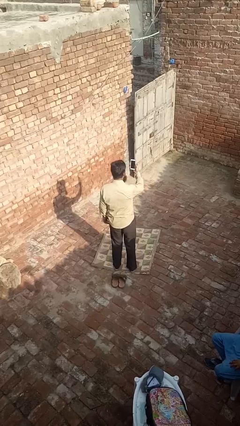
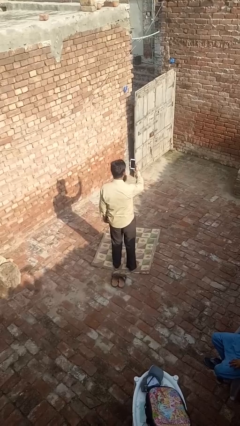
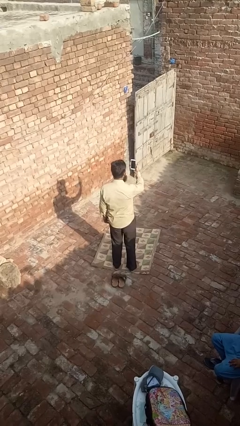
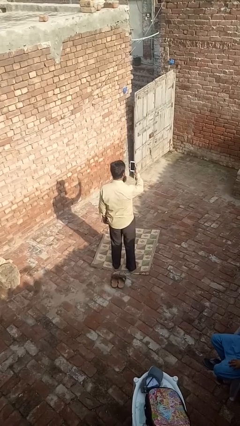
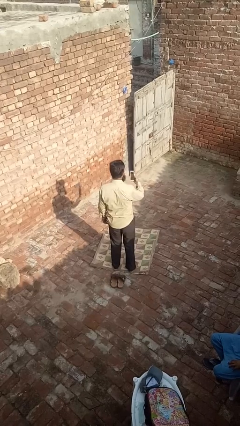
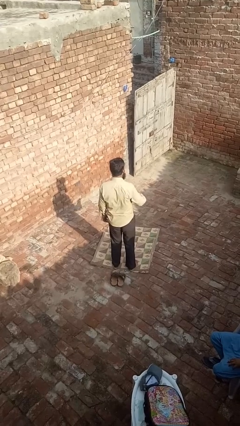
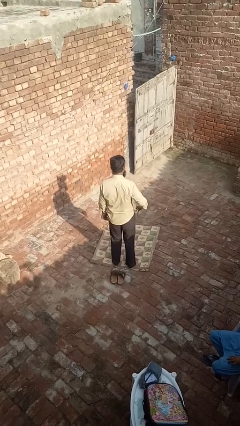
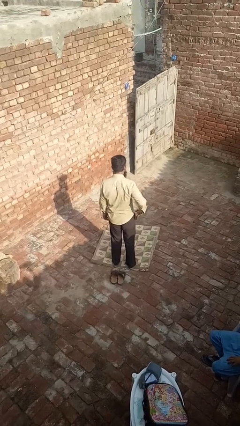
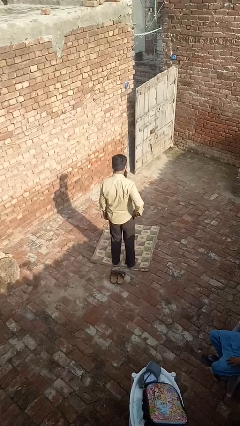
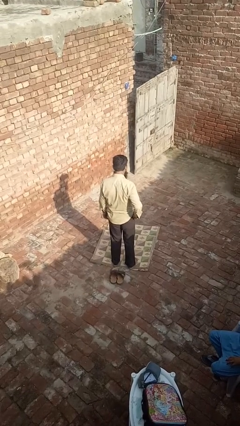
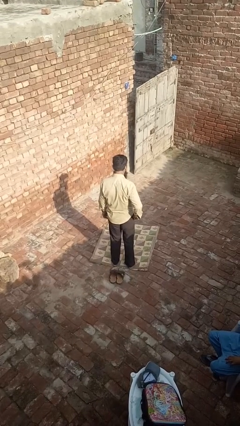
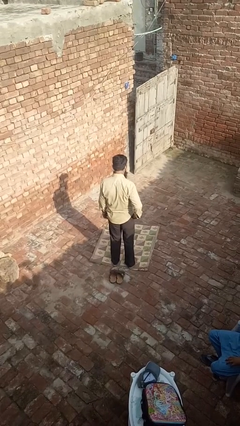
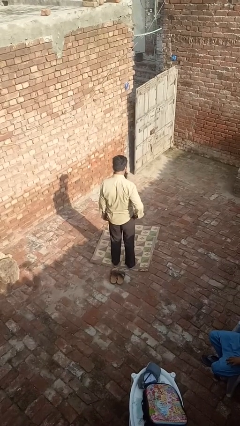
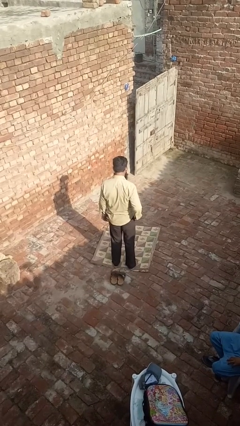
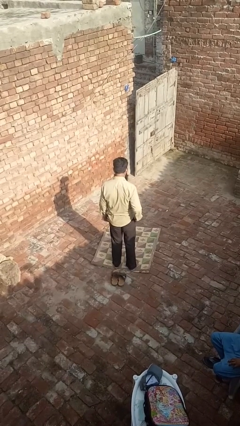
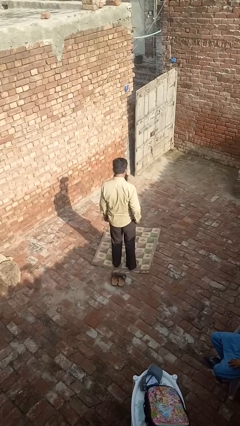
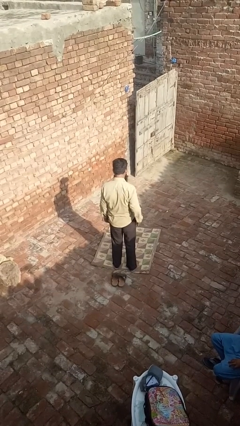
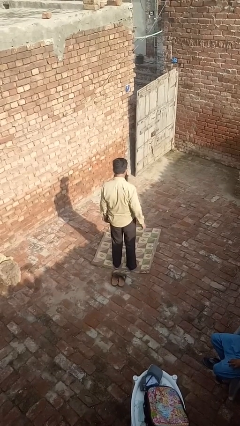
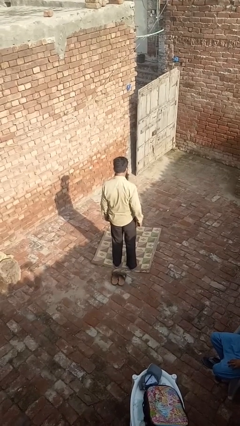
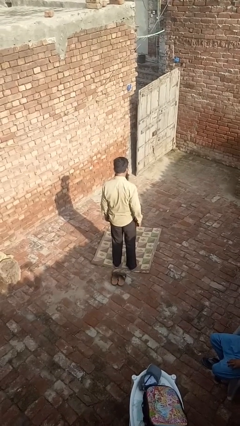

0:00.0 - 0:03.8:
person puts phone into pocket

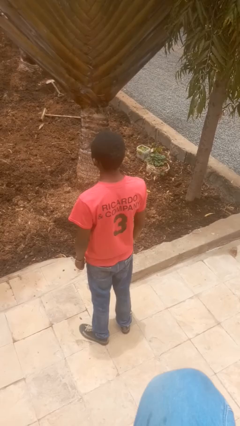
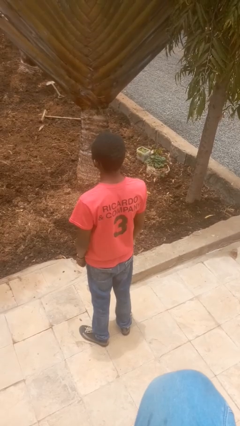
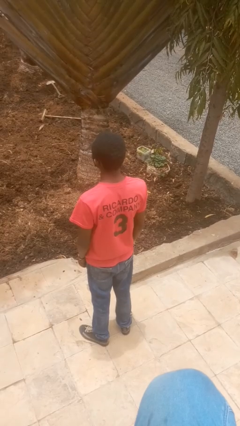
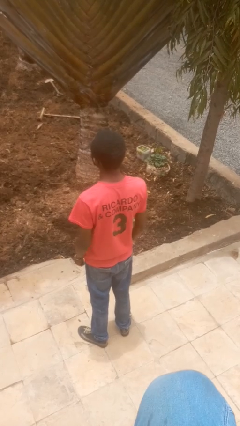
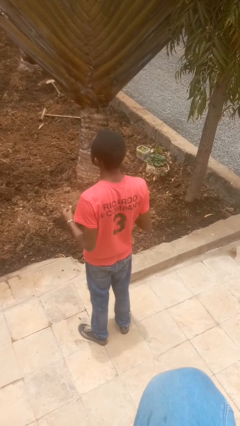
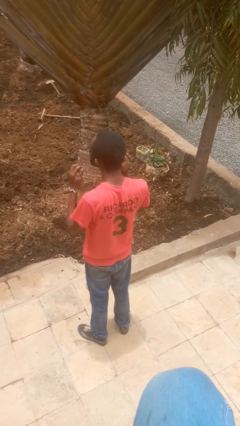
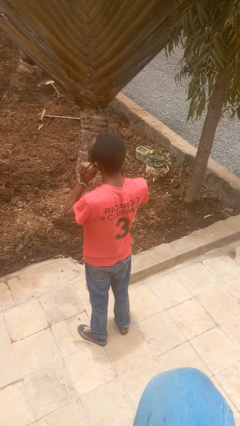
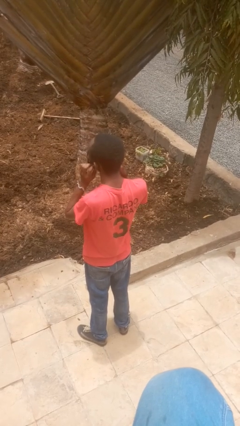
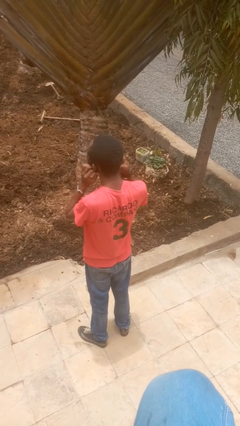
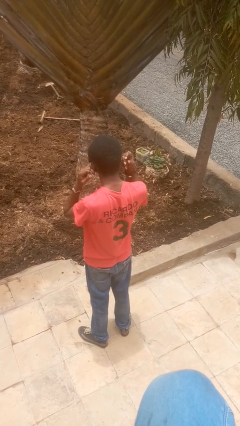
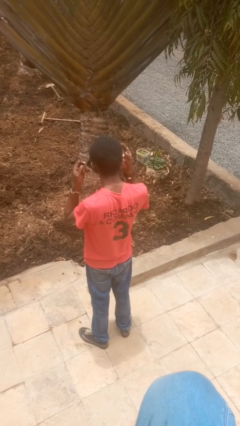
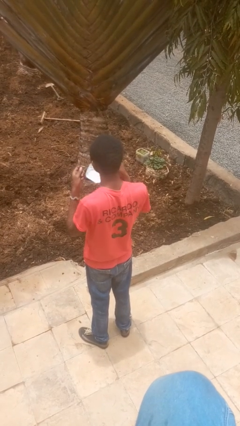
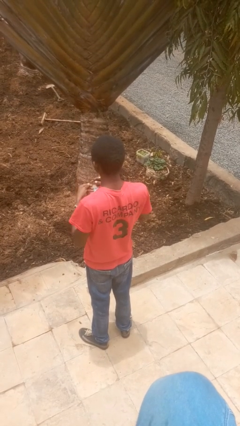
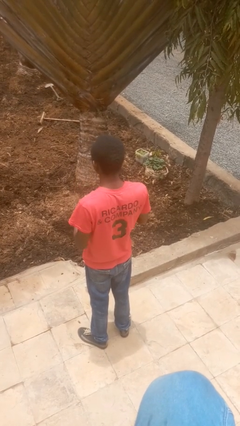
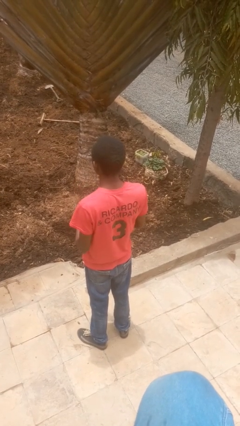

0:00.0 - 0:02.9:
person takes off facemask

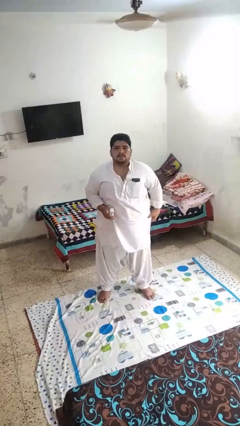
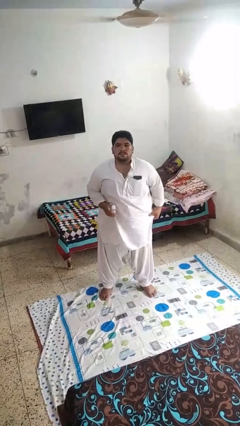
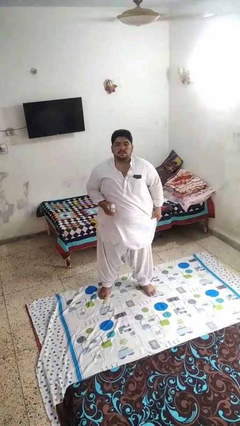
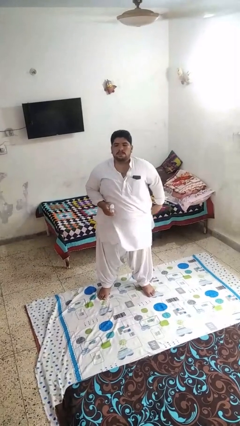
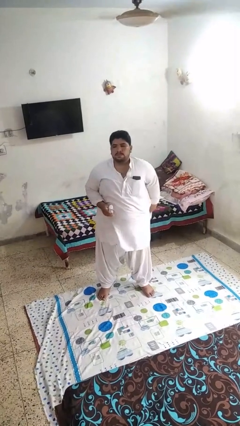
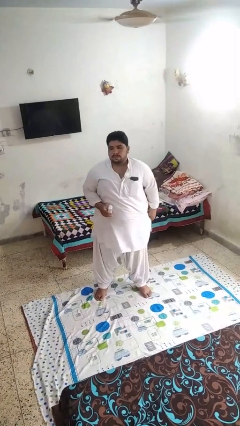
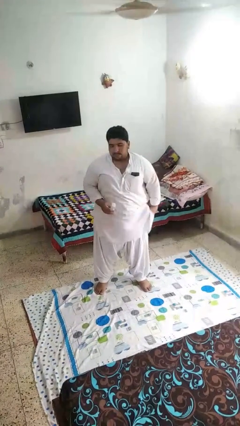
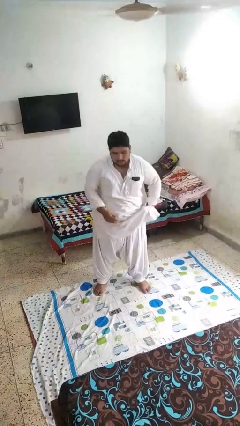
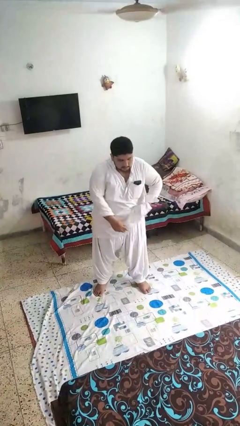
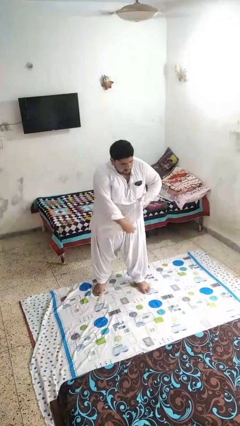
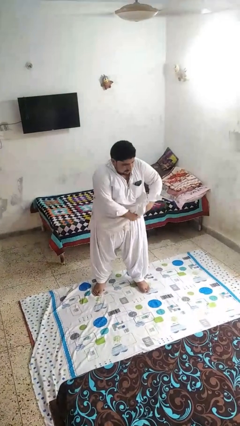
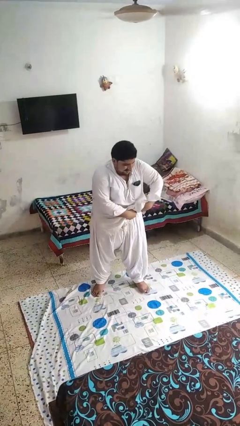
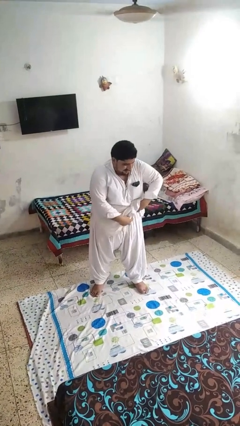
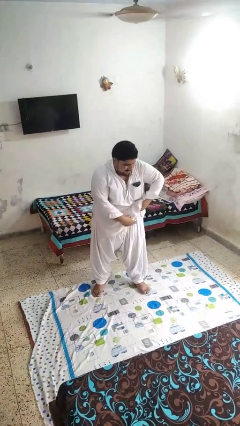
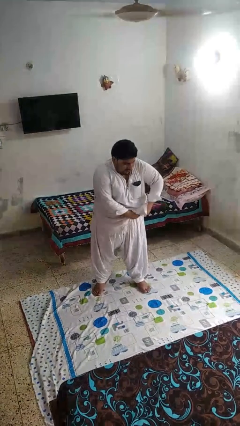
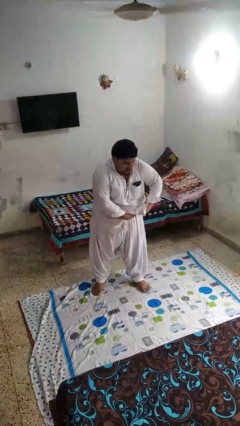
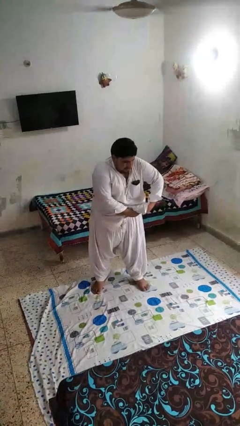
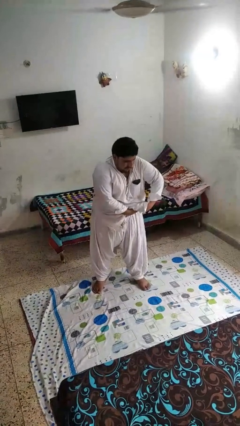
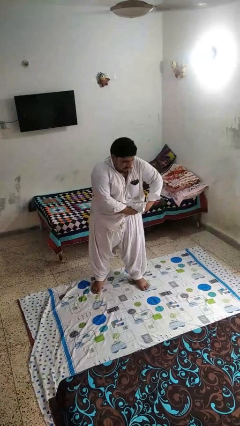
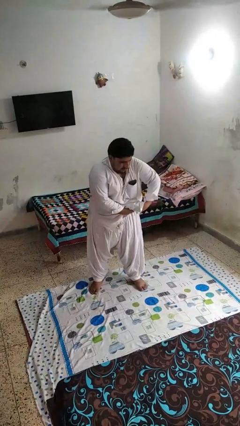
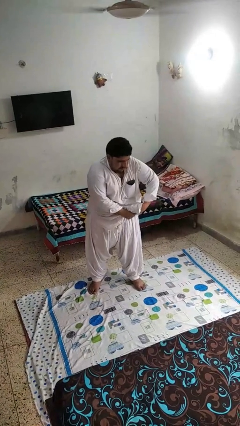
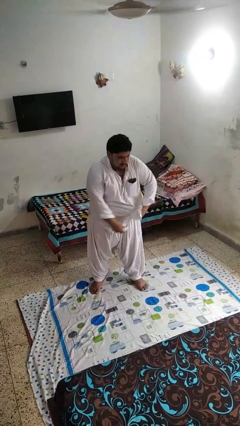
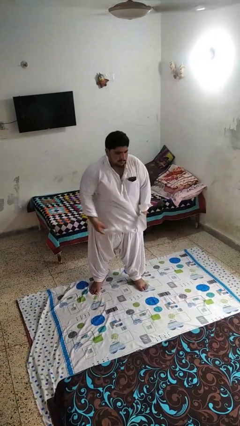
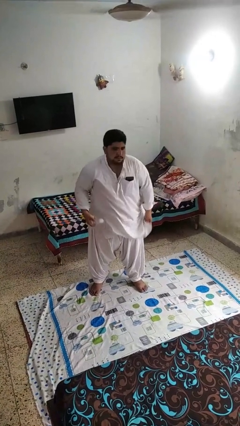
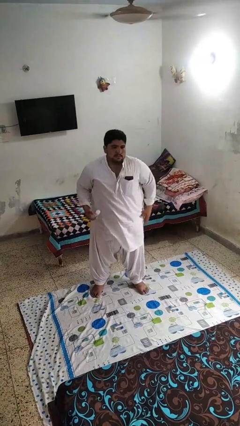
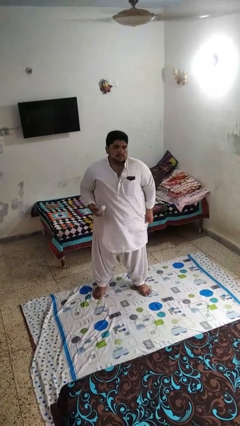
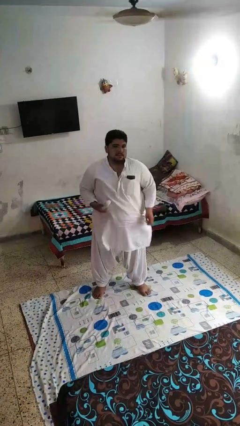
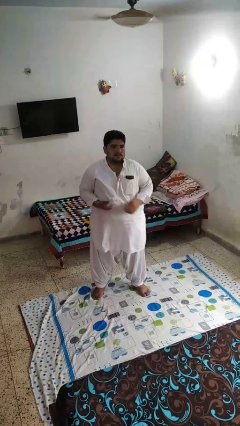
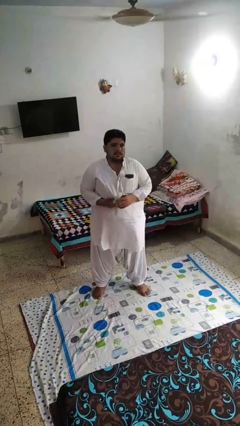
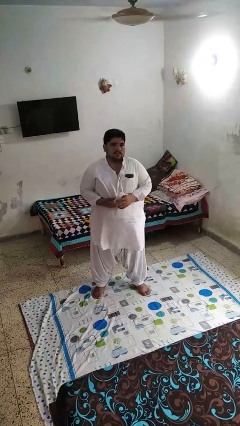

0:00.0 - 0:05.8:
person applies deodorant

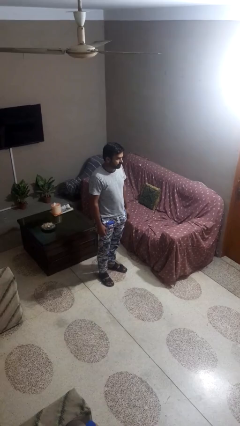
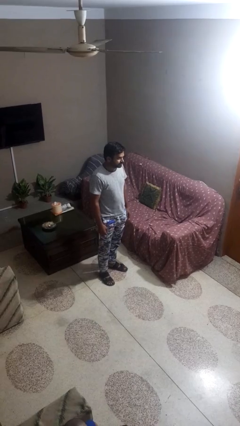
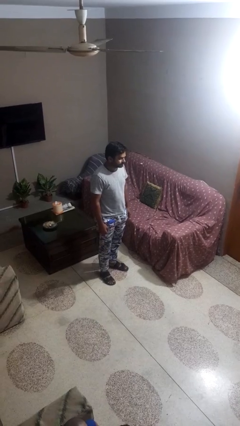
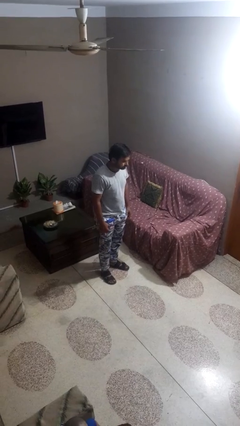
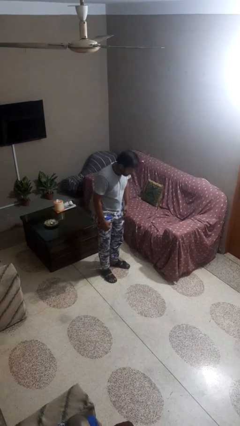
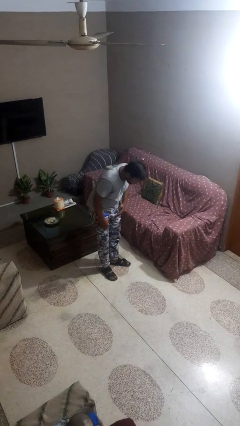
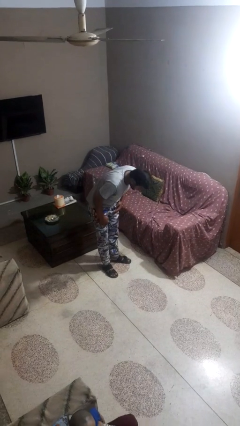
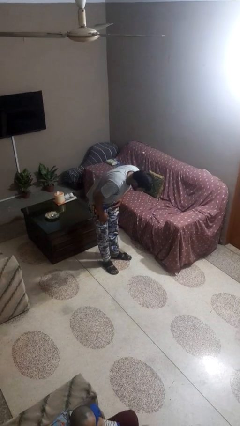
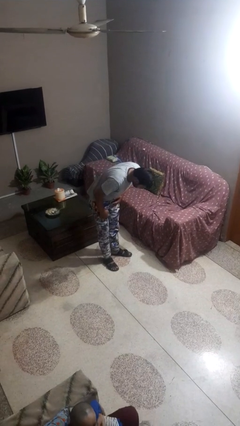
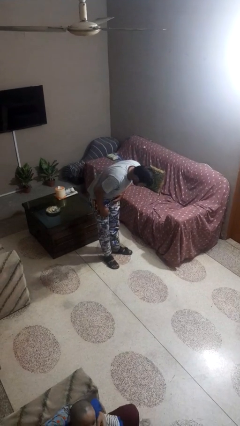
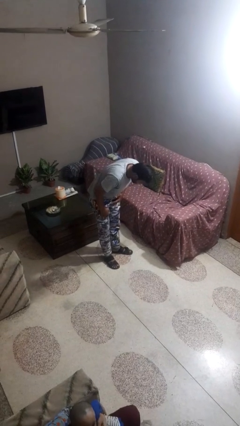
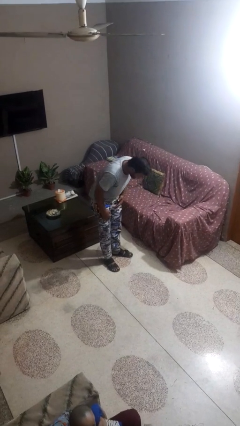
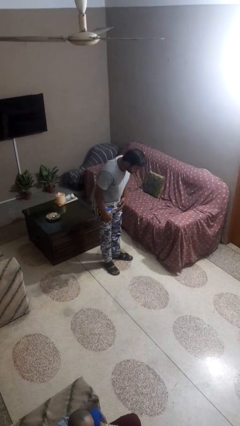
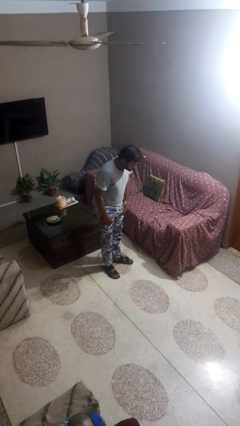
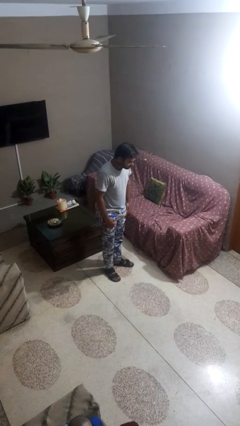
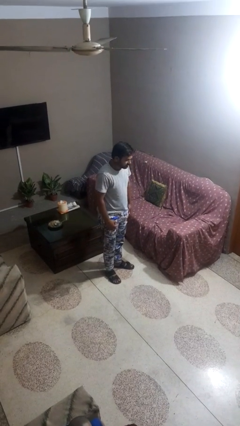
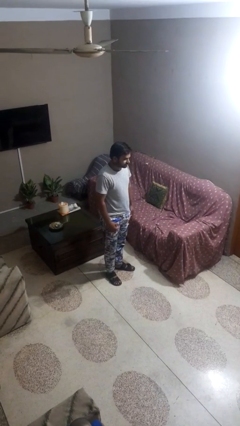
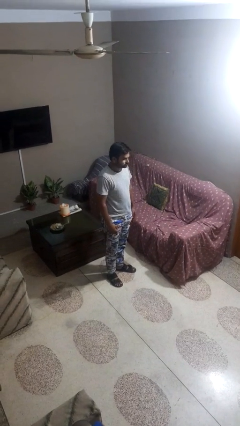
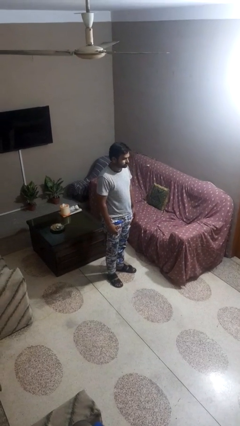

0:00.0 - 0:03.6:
person bows

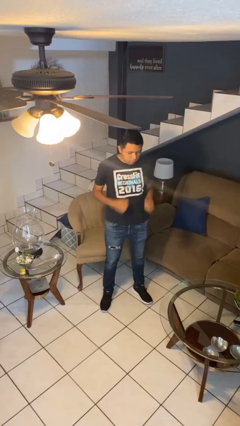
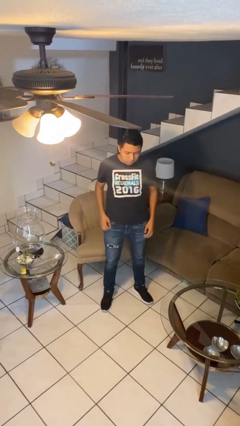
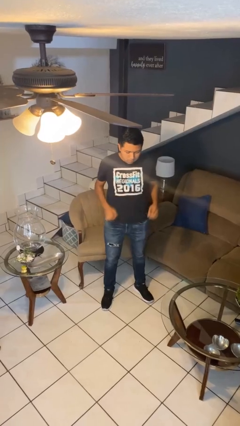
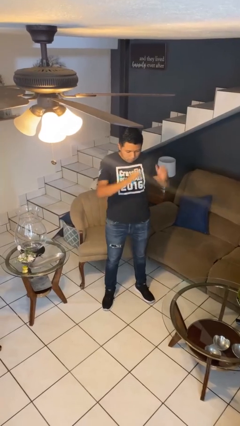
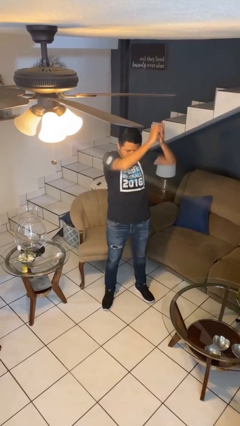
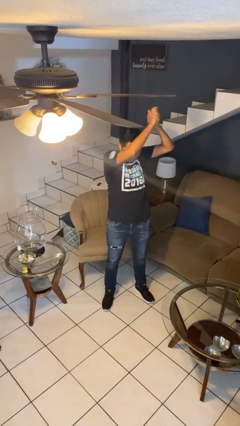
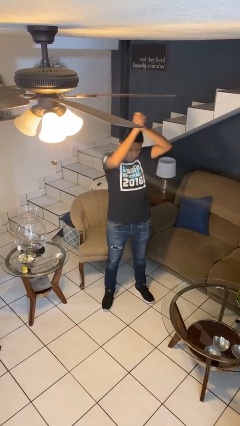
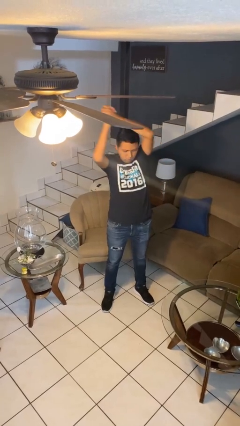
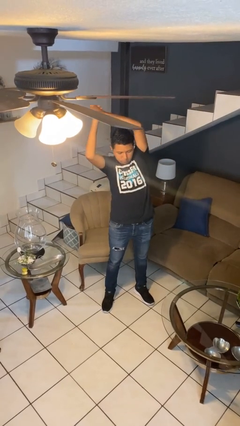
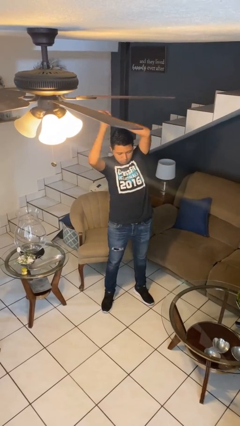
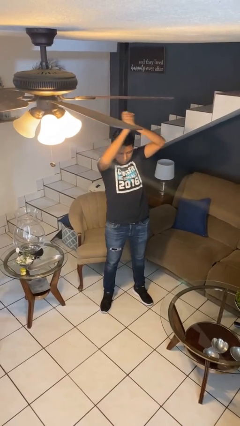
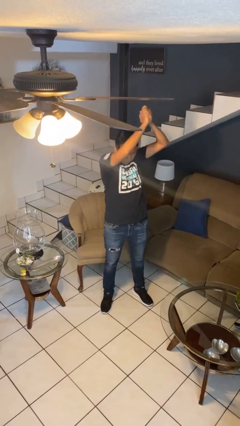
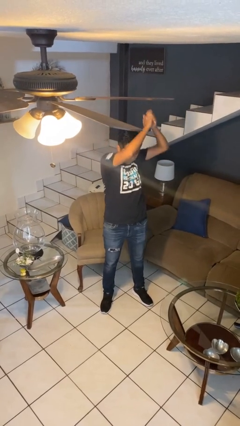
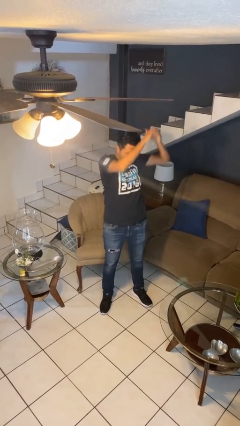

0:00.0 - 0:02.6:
person stretches arms over head
